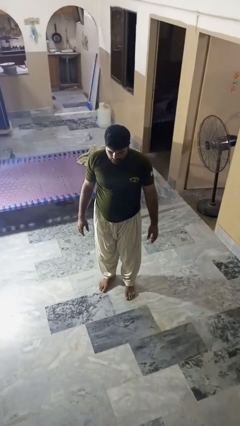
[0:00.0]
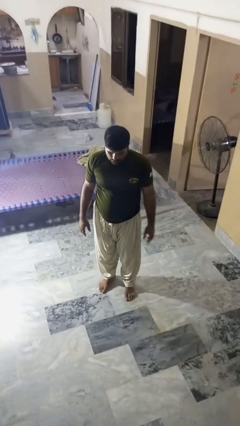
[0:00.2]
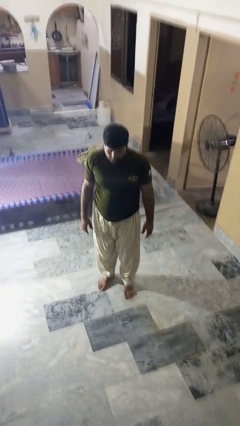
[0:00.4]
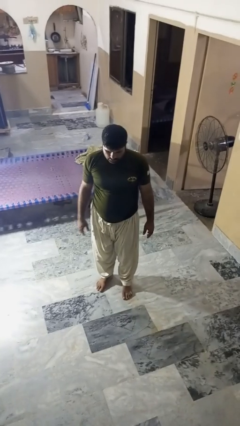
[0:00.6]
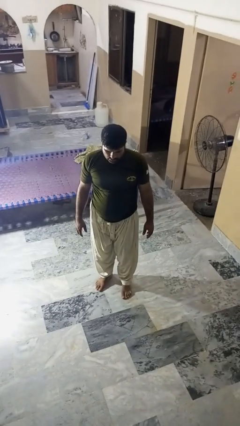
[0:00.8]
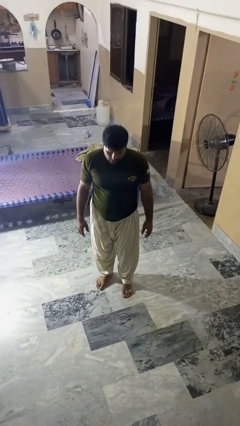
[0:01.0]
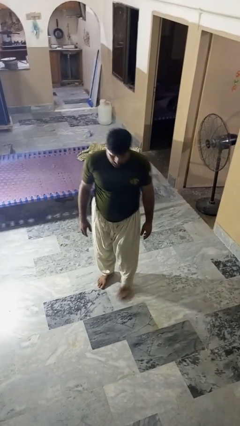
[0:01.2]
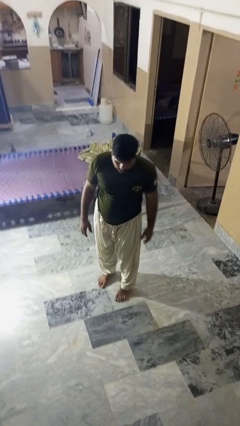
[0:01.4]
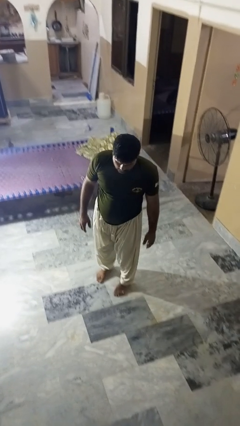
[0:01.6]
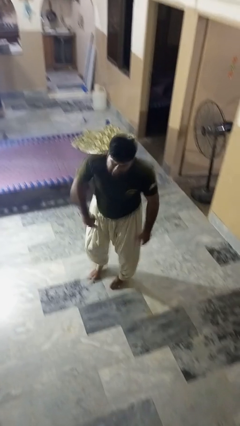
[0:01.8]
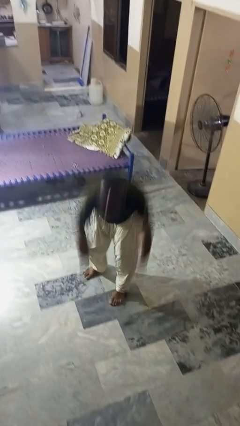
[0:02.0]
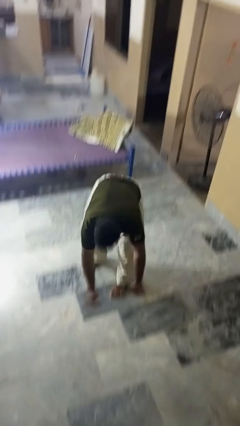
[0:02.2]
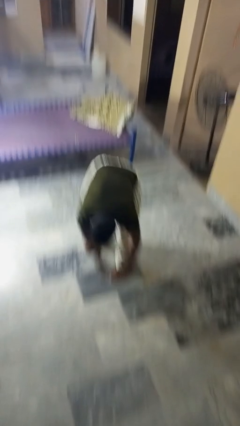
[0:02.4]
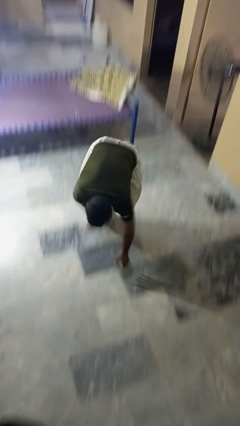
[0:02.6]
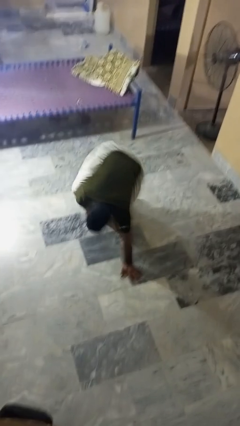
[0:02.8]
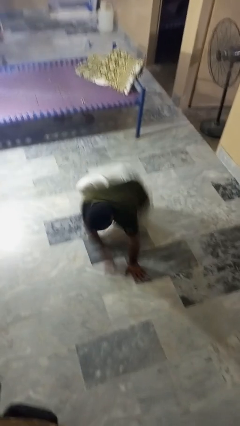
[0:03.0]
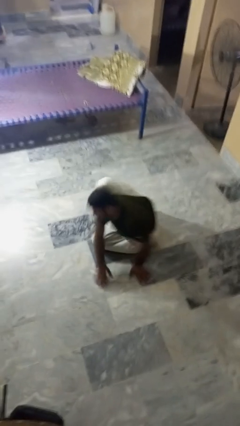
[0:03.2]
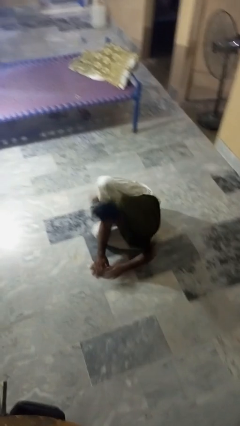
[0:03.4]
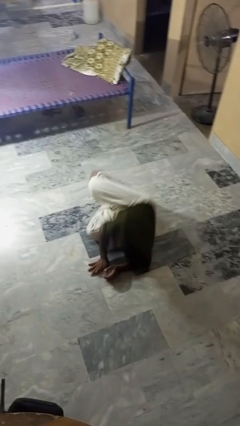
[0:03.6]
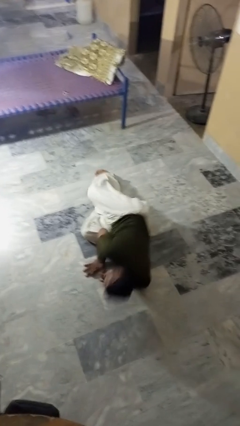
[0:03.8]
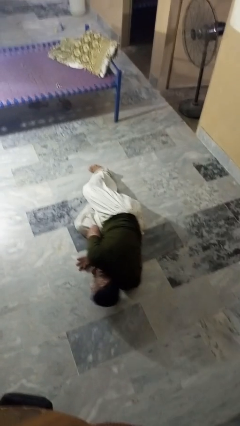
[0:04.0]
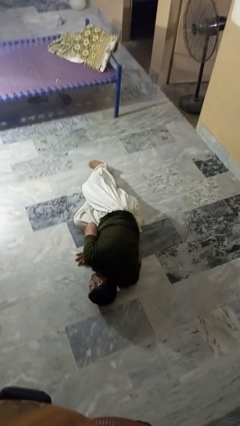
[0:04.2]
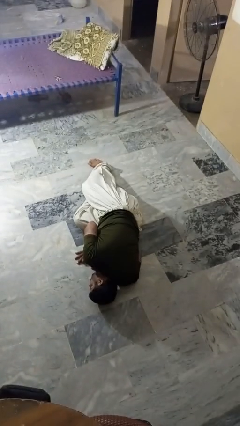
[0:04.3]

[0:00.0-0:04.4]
person falls while standing

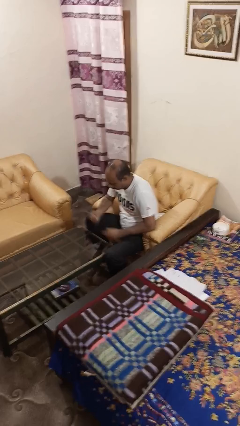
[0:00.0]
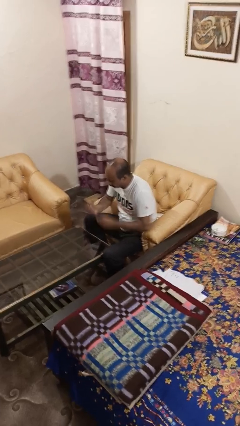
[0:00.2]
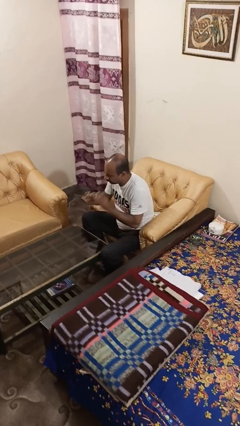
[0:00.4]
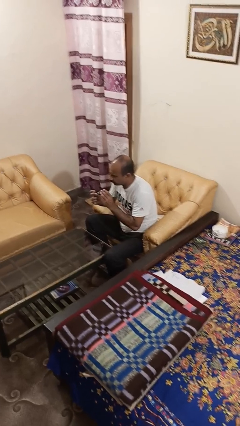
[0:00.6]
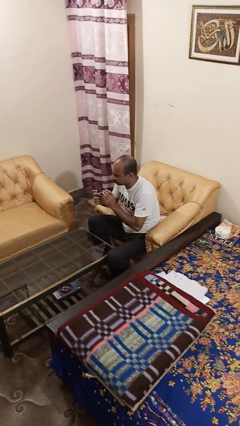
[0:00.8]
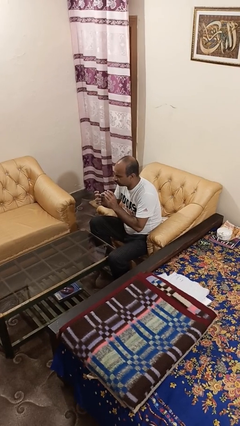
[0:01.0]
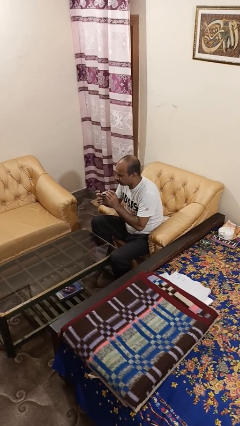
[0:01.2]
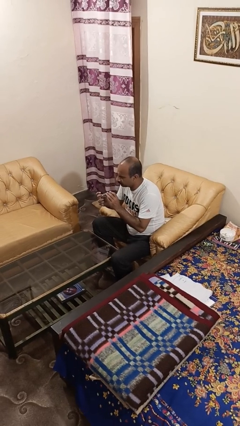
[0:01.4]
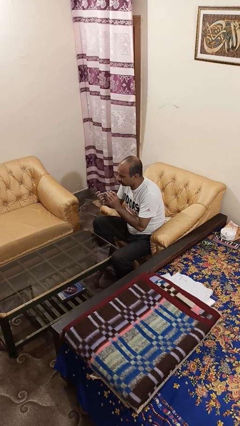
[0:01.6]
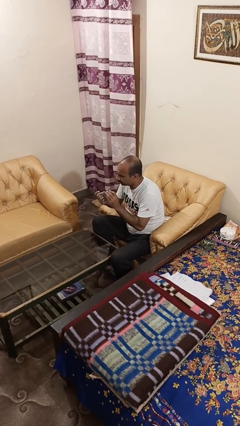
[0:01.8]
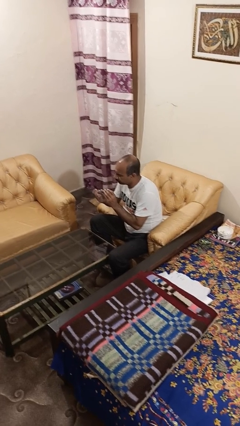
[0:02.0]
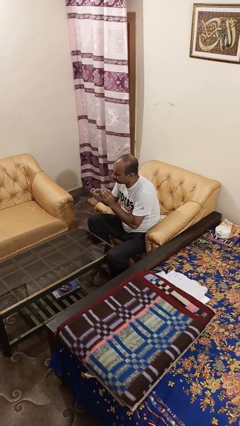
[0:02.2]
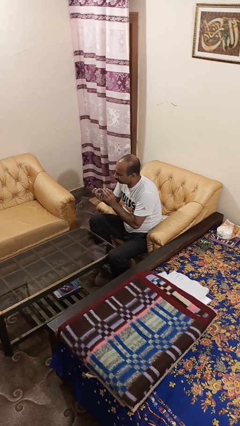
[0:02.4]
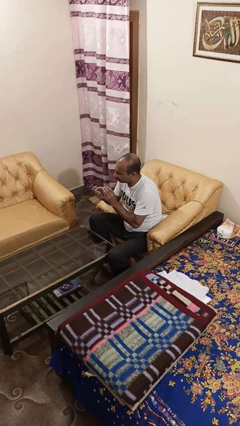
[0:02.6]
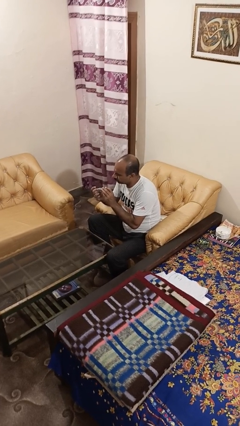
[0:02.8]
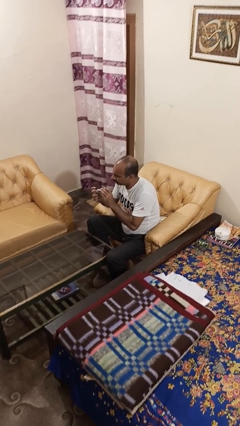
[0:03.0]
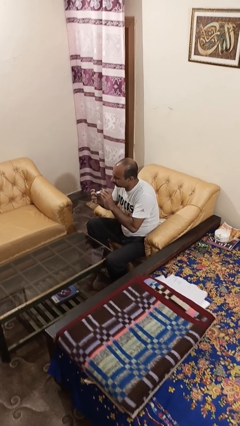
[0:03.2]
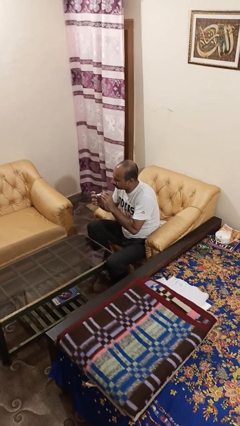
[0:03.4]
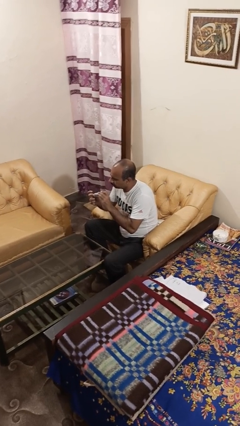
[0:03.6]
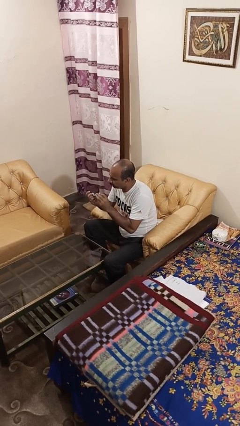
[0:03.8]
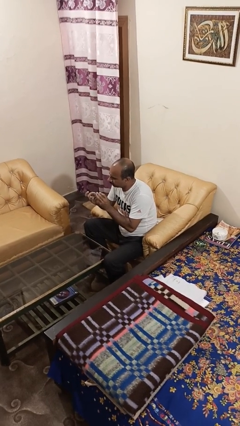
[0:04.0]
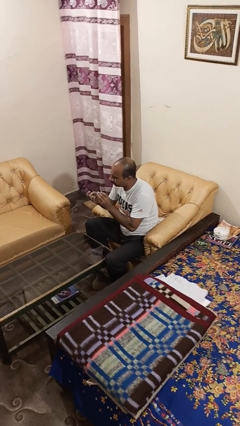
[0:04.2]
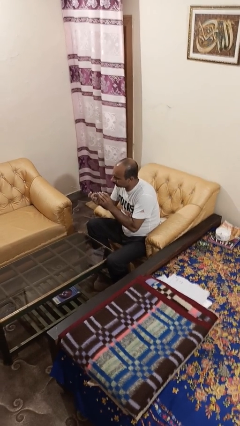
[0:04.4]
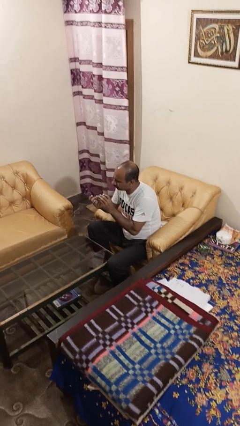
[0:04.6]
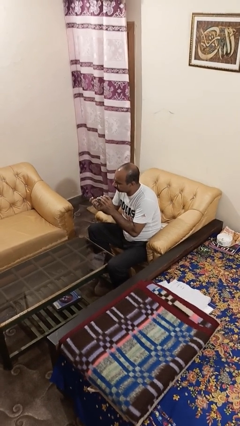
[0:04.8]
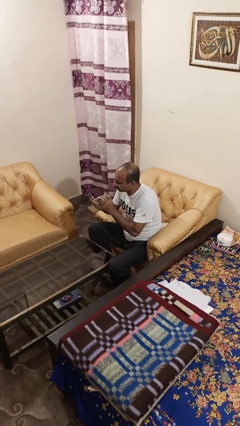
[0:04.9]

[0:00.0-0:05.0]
person clips fingernails

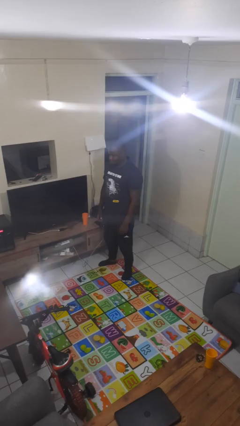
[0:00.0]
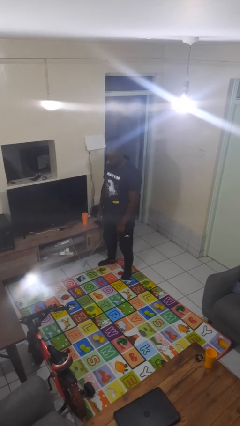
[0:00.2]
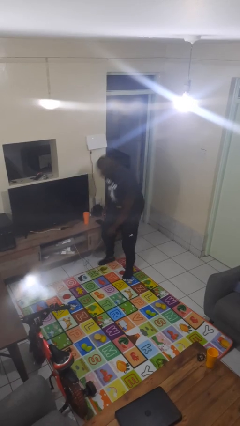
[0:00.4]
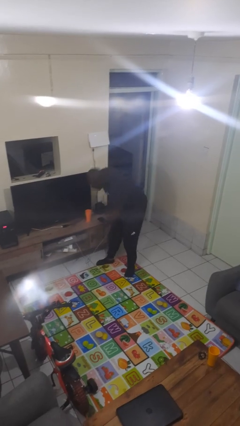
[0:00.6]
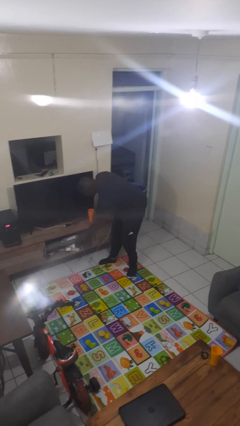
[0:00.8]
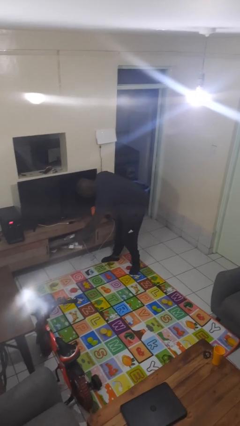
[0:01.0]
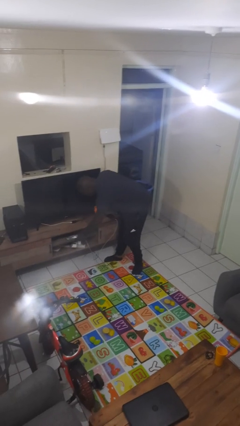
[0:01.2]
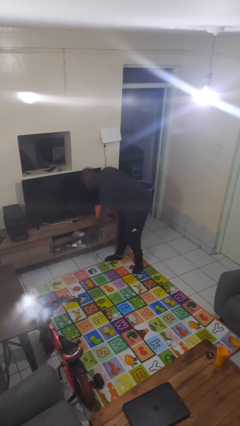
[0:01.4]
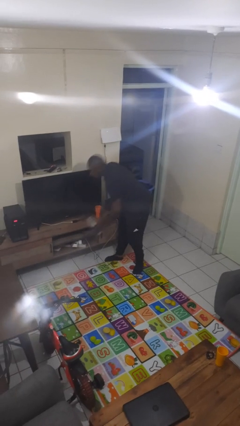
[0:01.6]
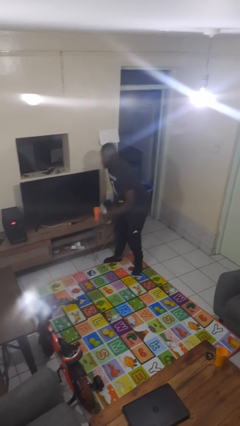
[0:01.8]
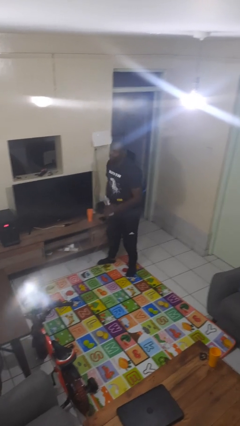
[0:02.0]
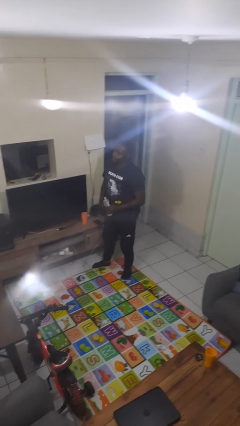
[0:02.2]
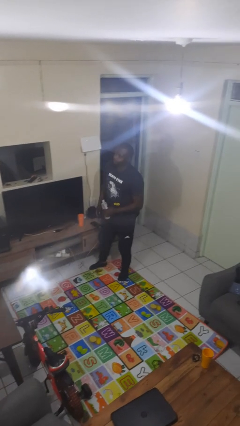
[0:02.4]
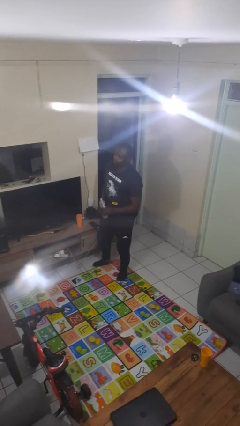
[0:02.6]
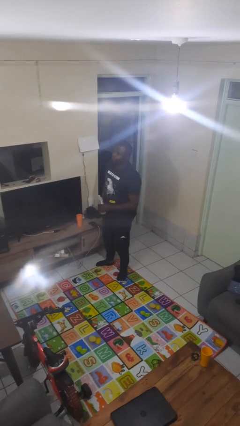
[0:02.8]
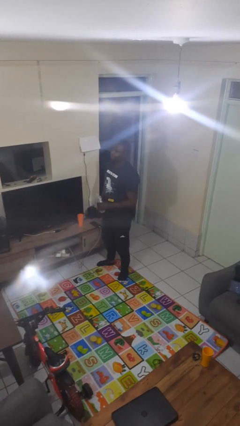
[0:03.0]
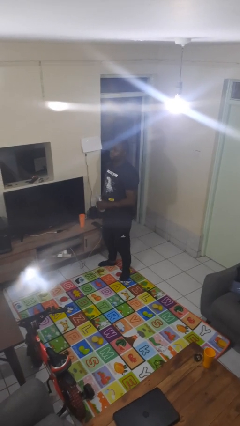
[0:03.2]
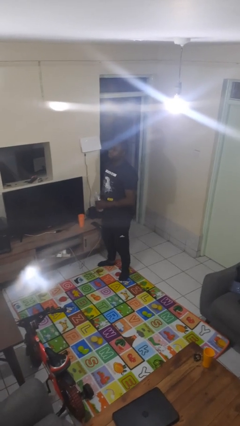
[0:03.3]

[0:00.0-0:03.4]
person picks up object from cabinet

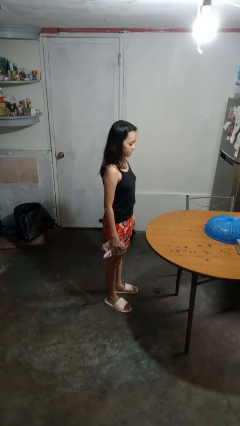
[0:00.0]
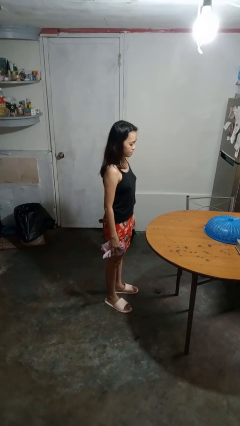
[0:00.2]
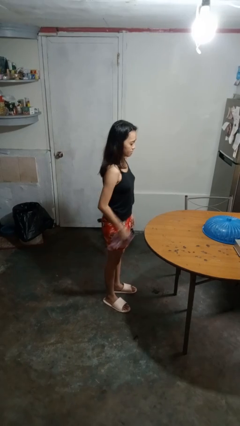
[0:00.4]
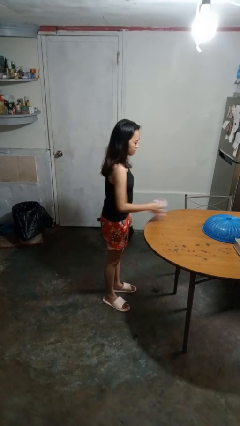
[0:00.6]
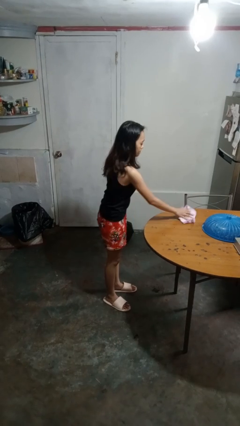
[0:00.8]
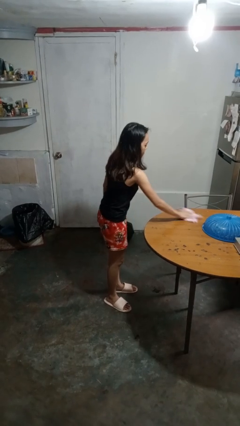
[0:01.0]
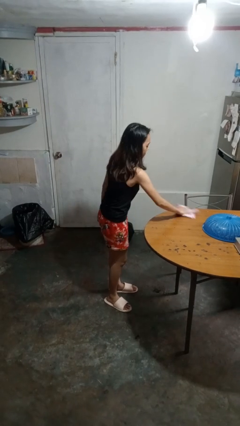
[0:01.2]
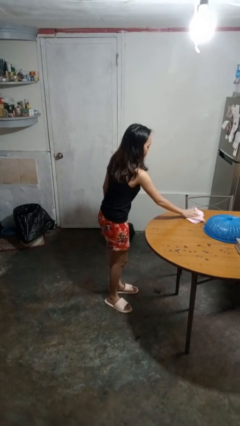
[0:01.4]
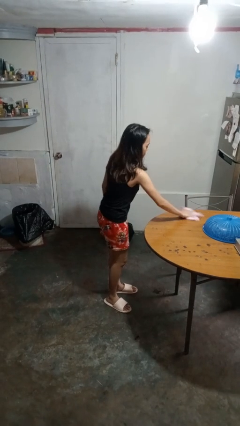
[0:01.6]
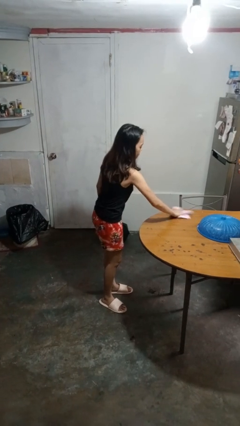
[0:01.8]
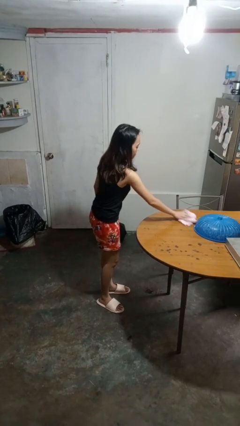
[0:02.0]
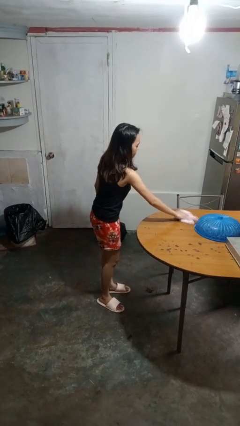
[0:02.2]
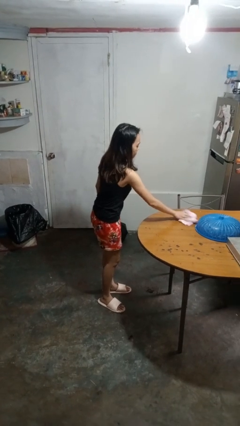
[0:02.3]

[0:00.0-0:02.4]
person cleans table with rag

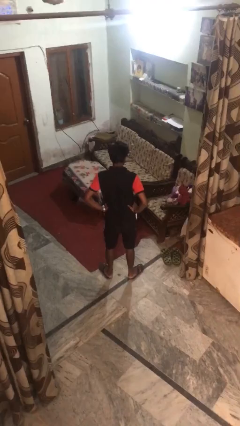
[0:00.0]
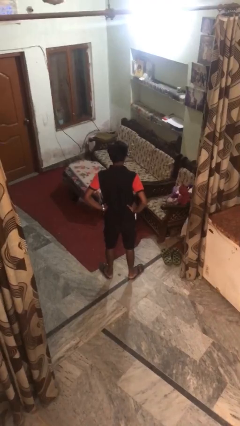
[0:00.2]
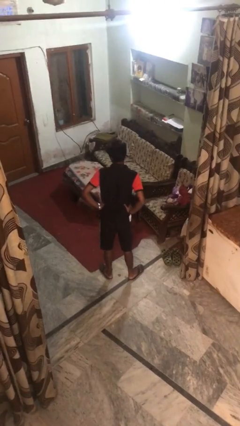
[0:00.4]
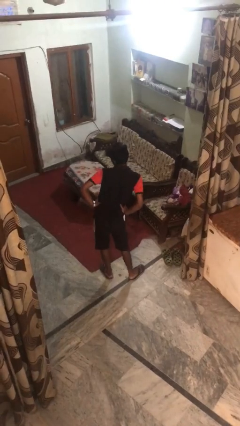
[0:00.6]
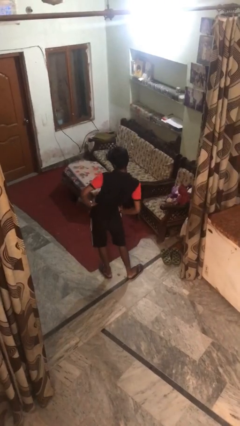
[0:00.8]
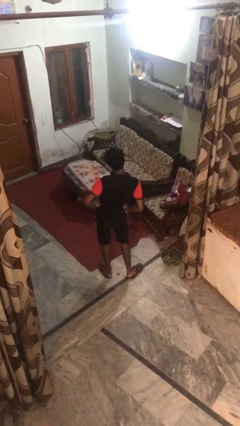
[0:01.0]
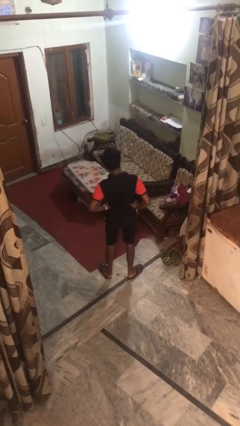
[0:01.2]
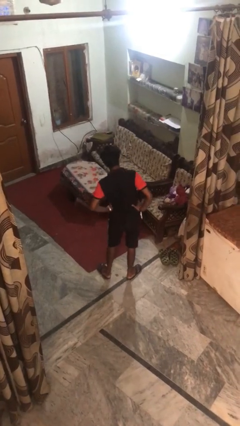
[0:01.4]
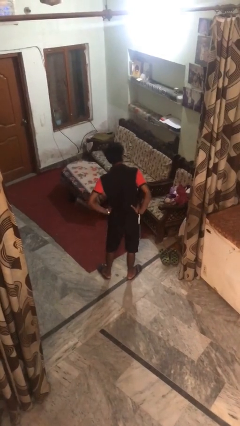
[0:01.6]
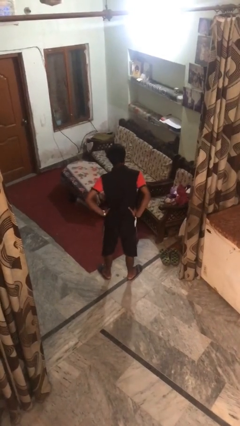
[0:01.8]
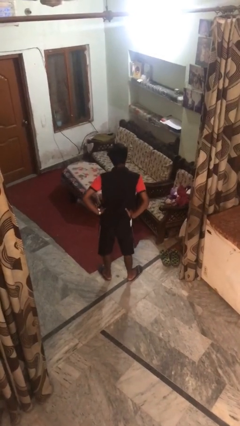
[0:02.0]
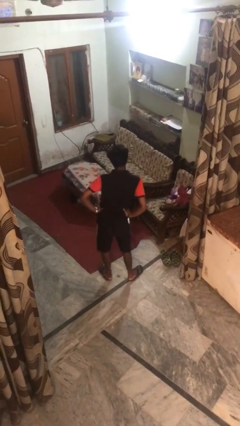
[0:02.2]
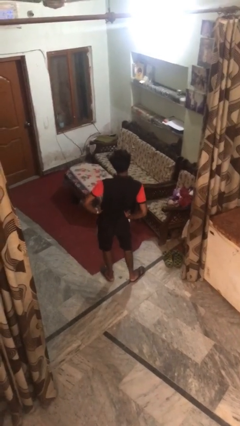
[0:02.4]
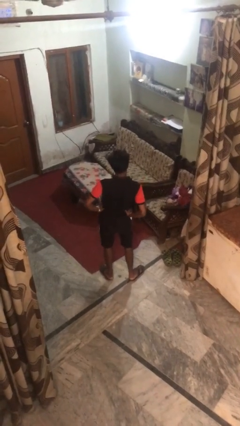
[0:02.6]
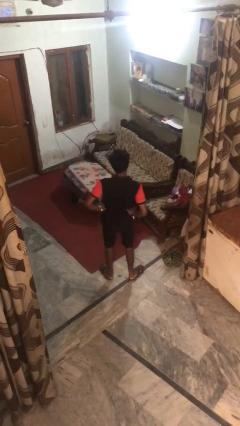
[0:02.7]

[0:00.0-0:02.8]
person wiggles hips

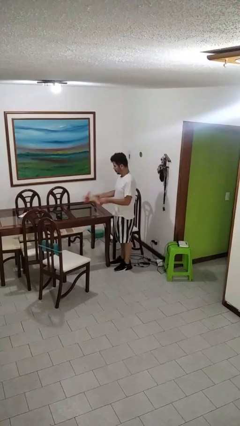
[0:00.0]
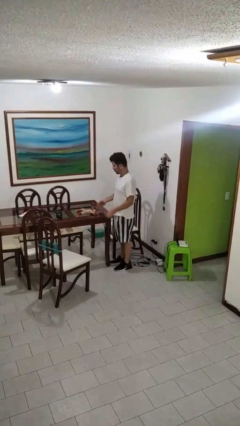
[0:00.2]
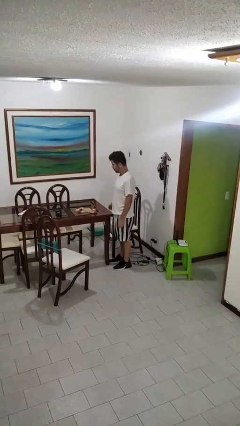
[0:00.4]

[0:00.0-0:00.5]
person throws object on table
